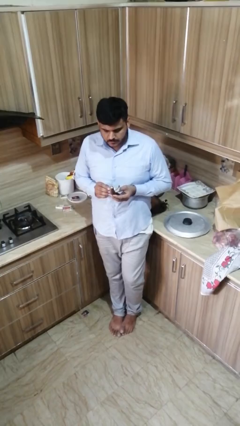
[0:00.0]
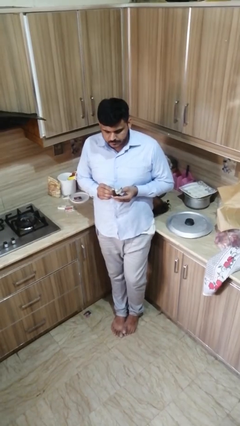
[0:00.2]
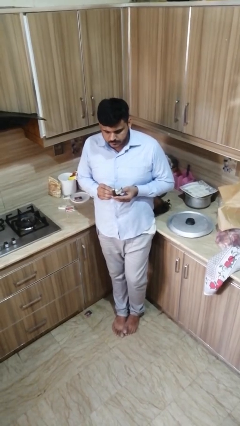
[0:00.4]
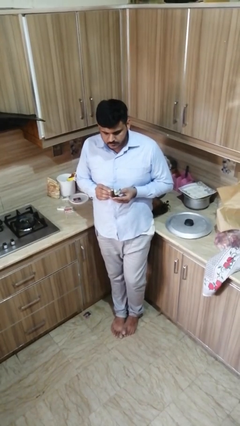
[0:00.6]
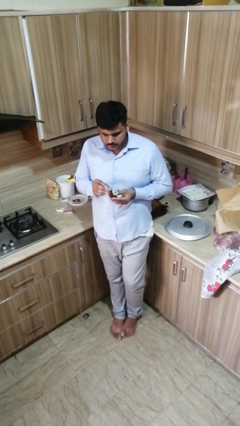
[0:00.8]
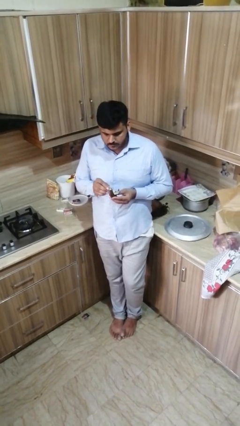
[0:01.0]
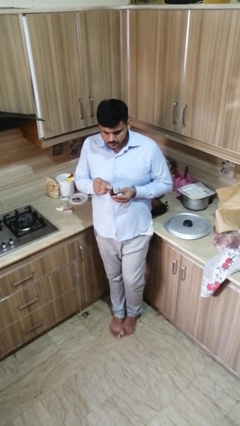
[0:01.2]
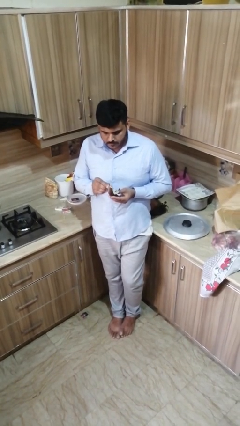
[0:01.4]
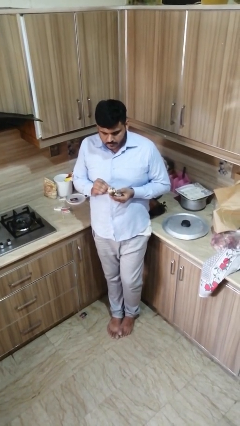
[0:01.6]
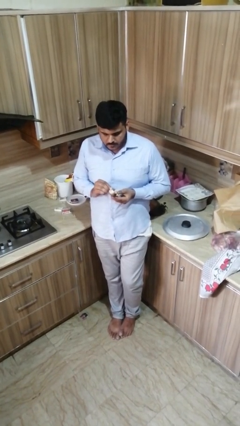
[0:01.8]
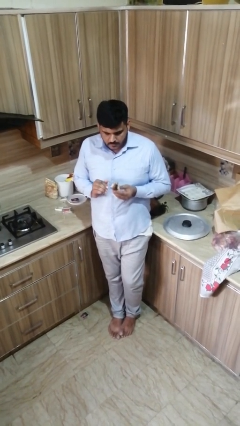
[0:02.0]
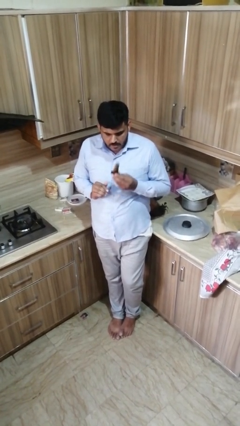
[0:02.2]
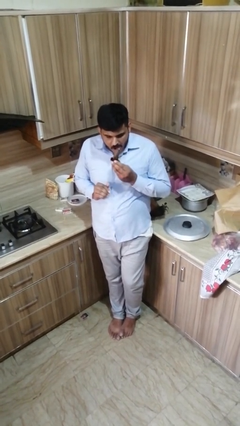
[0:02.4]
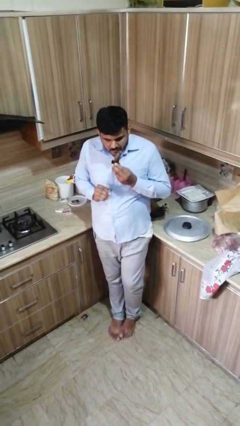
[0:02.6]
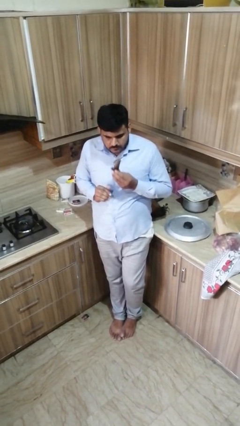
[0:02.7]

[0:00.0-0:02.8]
person eats banana

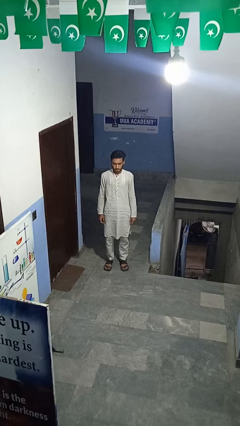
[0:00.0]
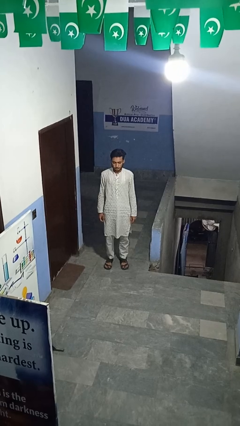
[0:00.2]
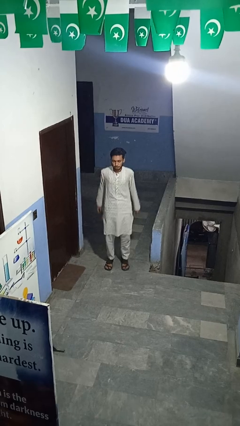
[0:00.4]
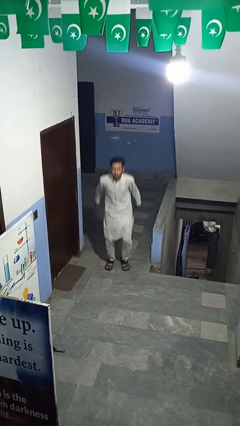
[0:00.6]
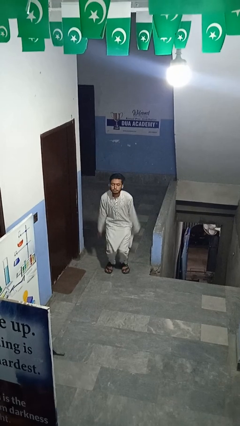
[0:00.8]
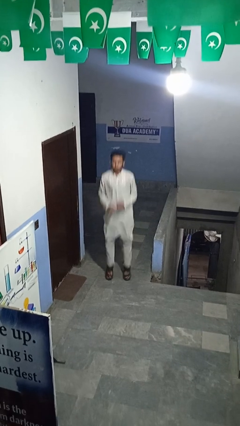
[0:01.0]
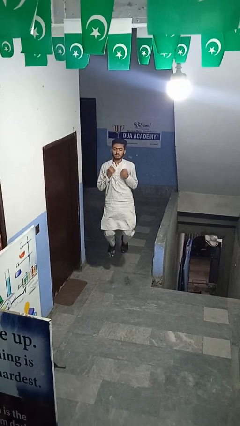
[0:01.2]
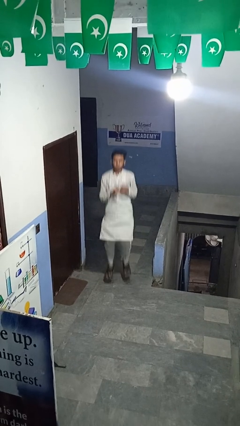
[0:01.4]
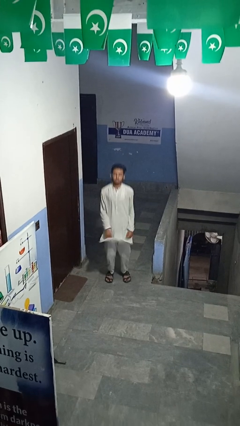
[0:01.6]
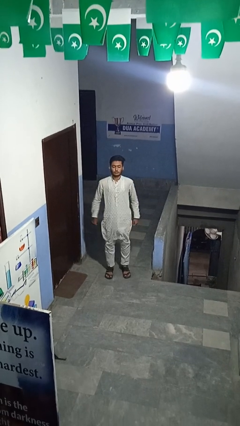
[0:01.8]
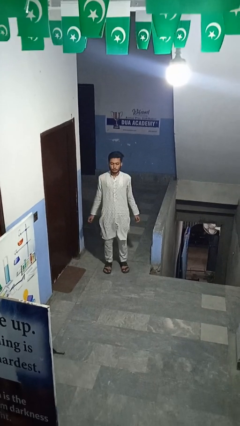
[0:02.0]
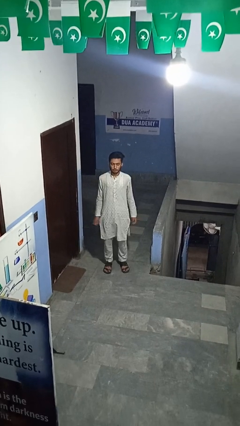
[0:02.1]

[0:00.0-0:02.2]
person jumps

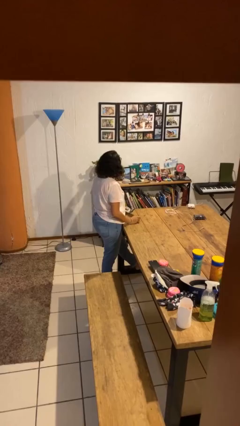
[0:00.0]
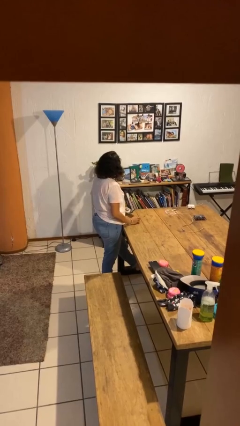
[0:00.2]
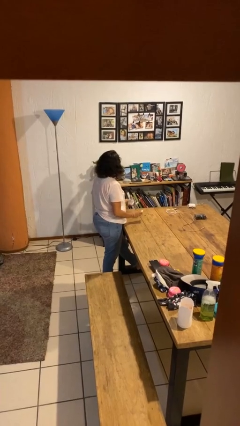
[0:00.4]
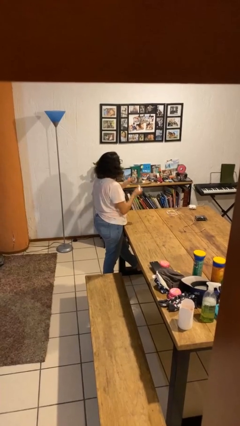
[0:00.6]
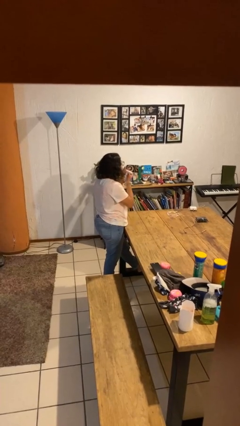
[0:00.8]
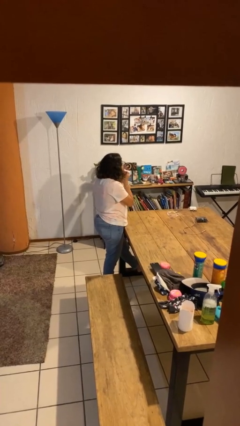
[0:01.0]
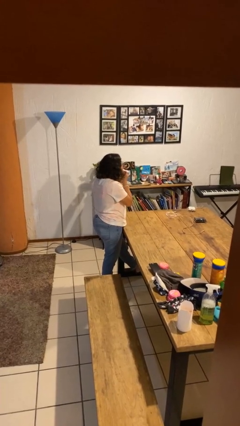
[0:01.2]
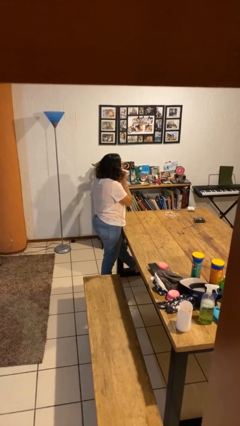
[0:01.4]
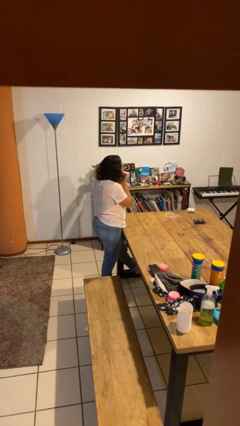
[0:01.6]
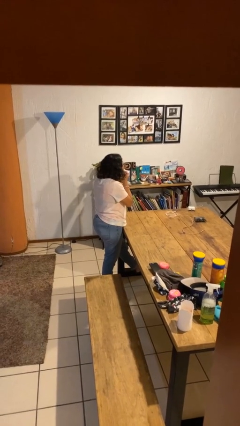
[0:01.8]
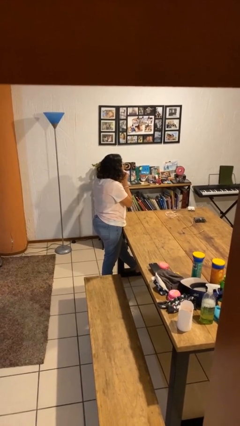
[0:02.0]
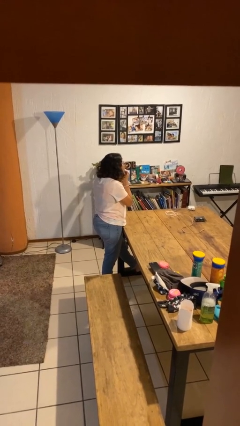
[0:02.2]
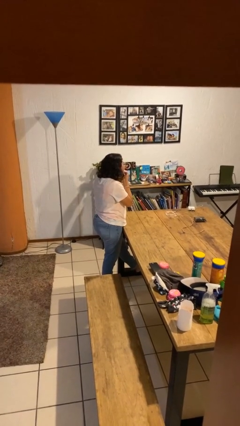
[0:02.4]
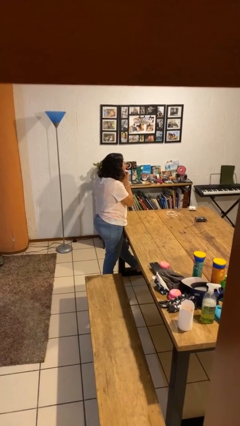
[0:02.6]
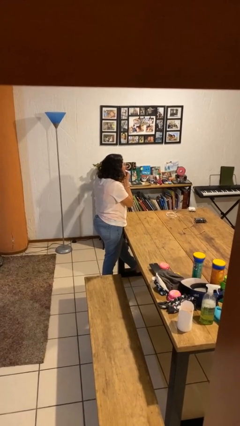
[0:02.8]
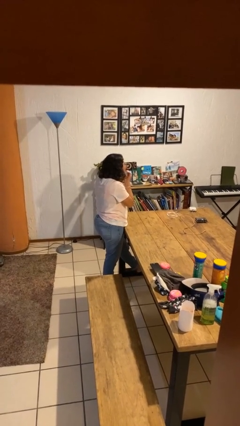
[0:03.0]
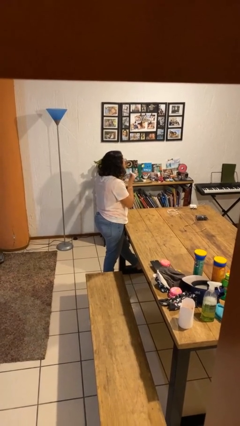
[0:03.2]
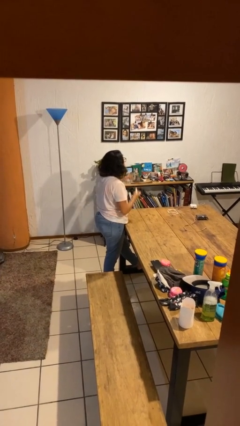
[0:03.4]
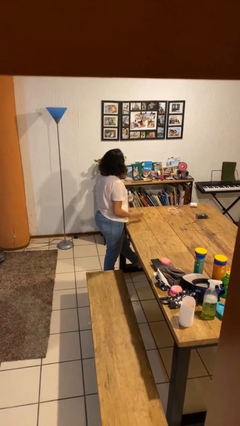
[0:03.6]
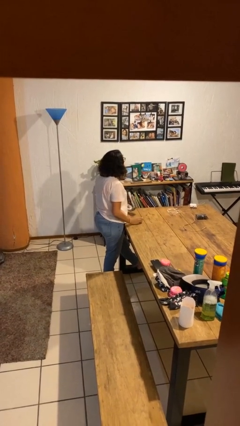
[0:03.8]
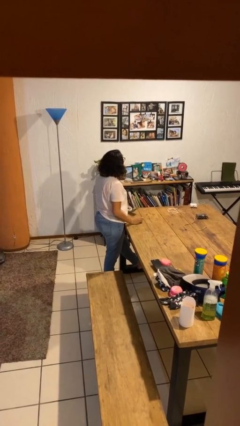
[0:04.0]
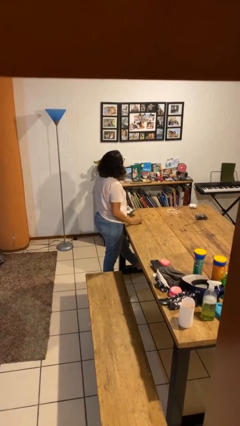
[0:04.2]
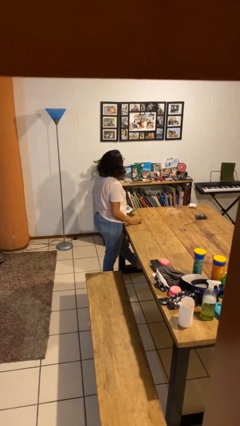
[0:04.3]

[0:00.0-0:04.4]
person applies lip makeup

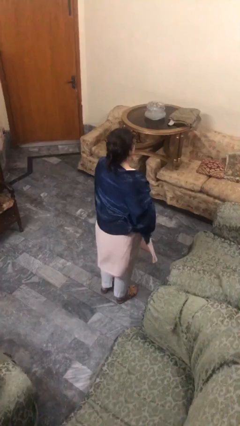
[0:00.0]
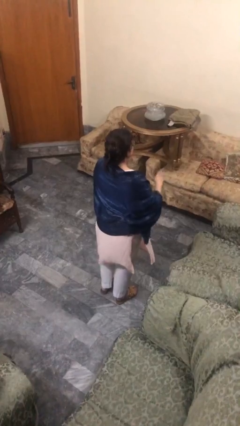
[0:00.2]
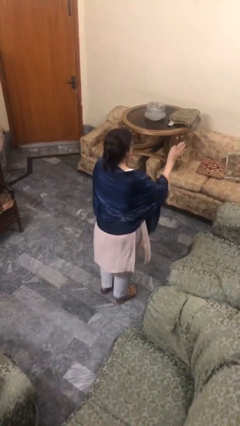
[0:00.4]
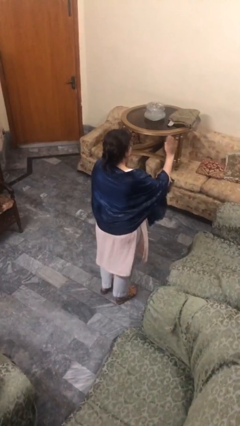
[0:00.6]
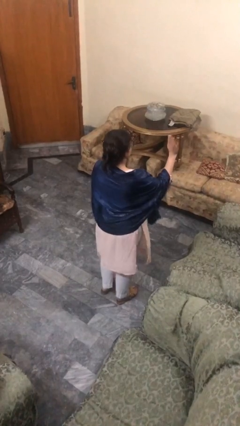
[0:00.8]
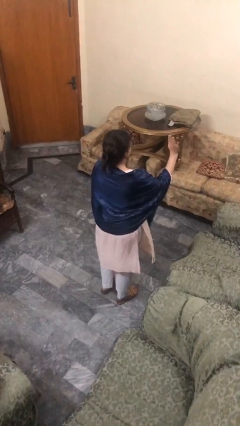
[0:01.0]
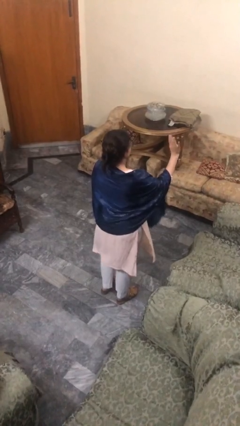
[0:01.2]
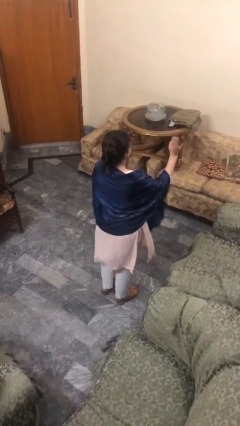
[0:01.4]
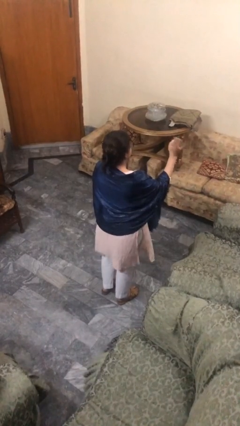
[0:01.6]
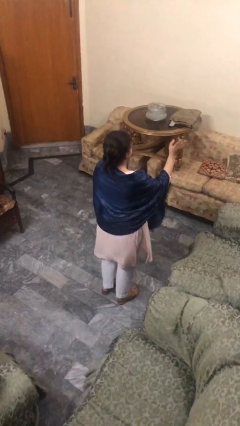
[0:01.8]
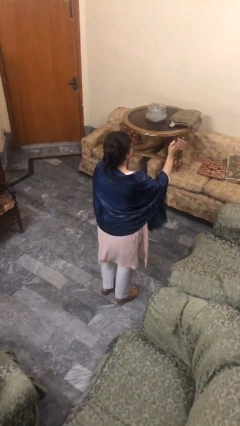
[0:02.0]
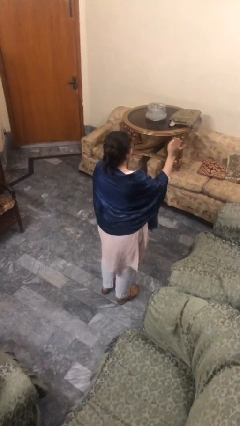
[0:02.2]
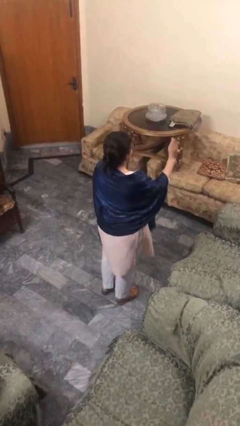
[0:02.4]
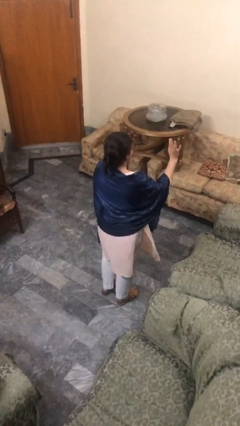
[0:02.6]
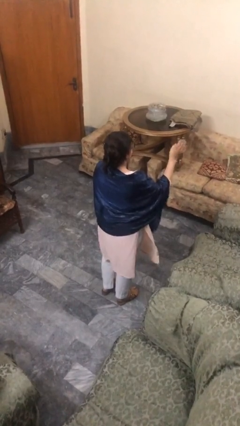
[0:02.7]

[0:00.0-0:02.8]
person waves at person

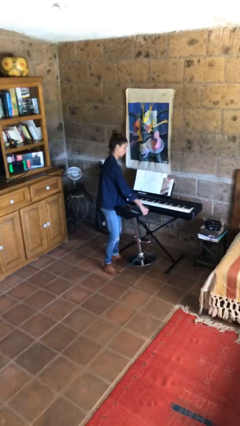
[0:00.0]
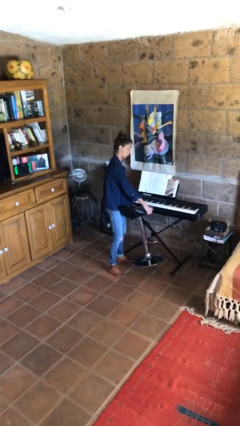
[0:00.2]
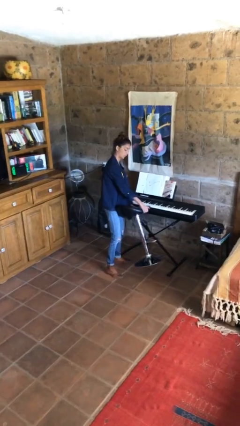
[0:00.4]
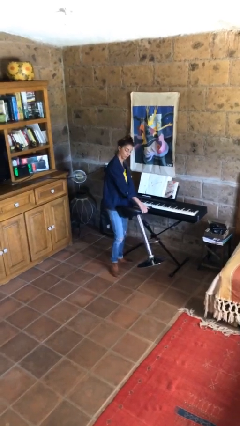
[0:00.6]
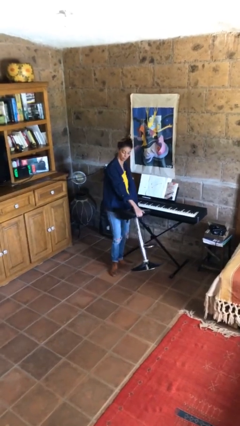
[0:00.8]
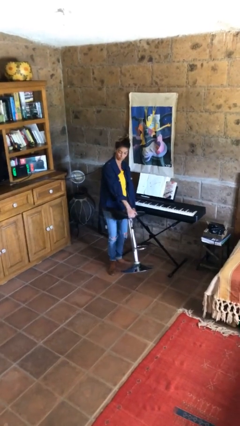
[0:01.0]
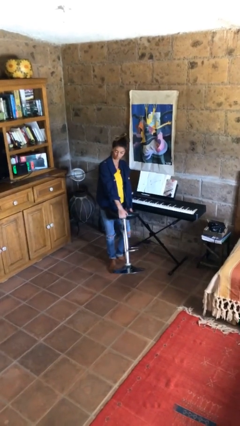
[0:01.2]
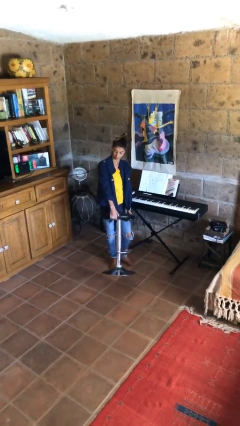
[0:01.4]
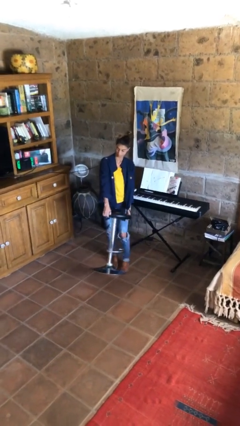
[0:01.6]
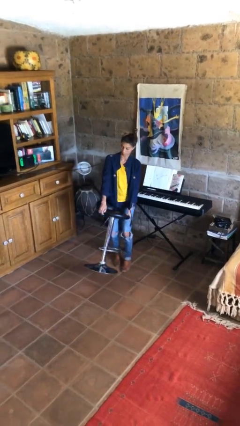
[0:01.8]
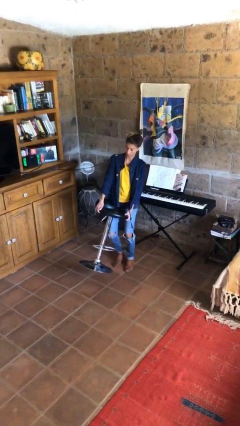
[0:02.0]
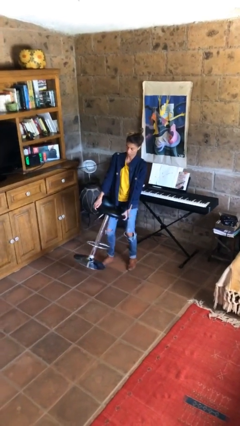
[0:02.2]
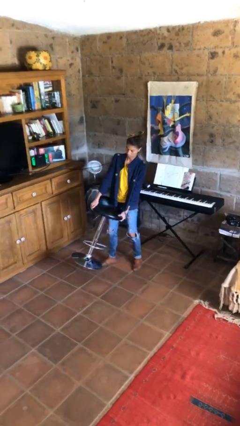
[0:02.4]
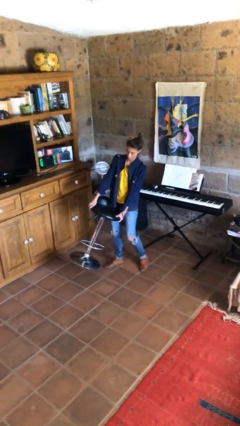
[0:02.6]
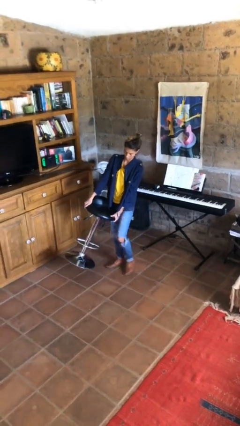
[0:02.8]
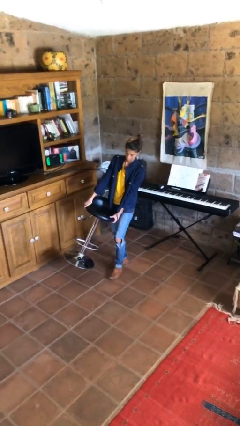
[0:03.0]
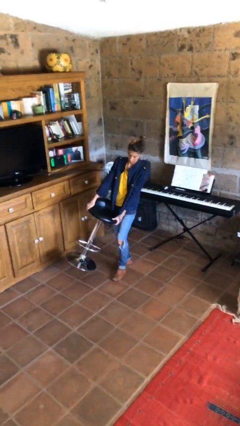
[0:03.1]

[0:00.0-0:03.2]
person carries heavy object

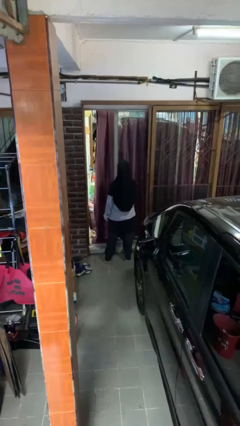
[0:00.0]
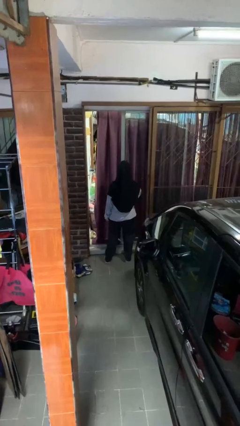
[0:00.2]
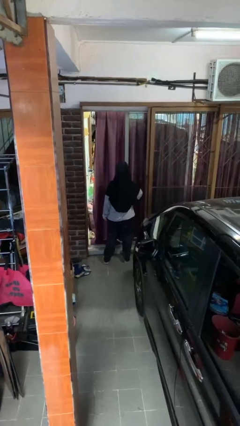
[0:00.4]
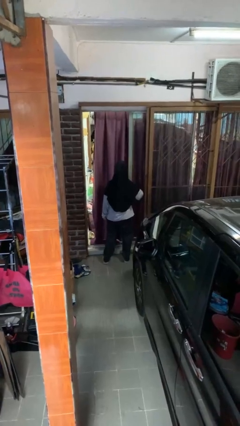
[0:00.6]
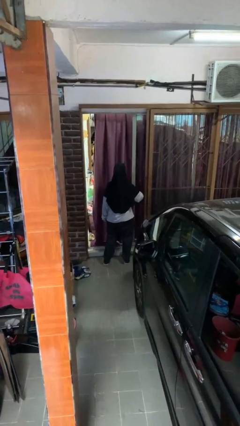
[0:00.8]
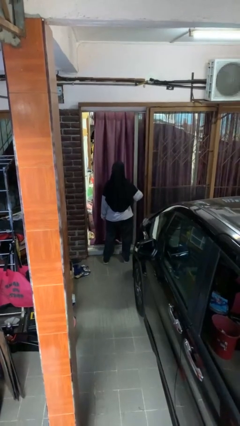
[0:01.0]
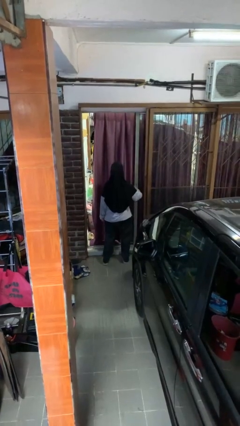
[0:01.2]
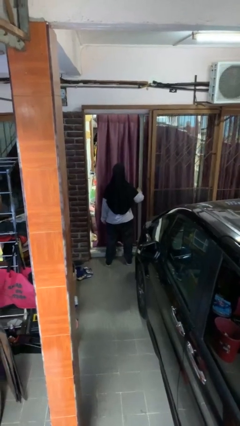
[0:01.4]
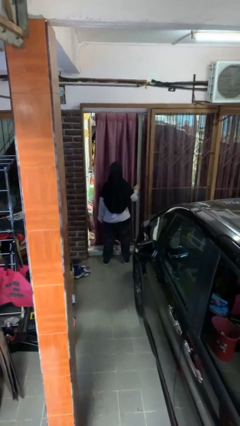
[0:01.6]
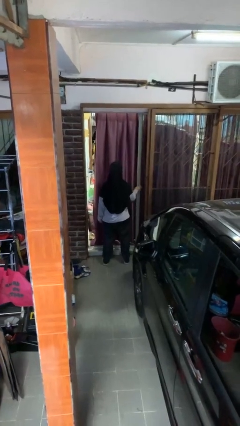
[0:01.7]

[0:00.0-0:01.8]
person opens sliding door
